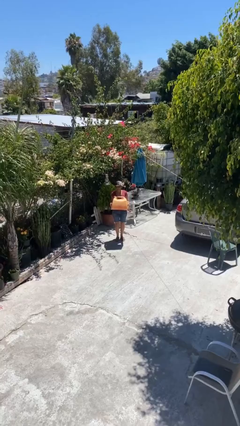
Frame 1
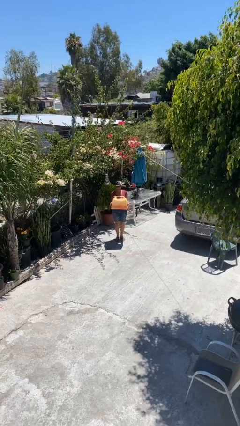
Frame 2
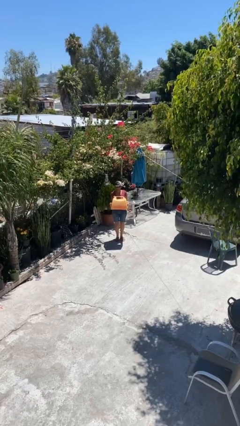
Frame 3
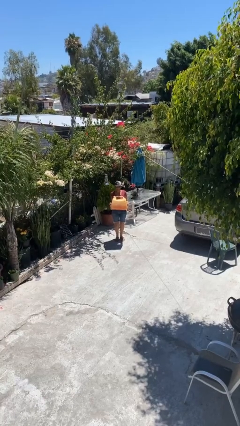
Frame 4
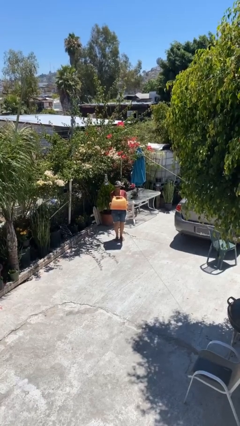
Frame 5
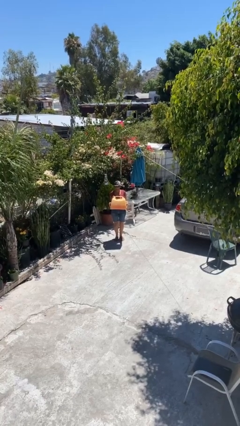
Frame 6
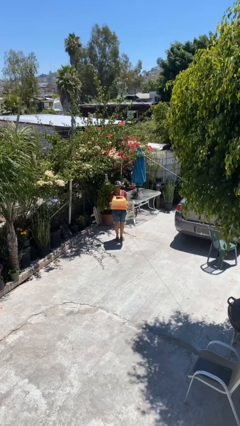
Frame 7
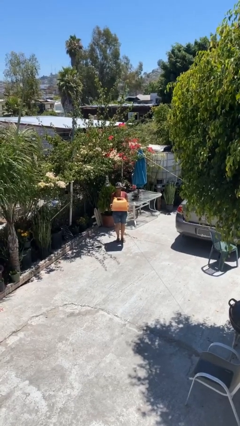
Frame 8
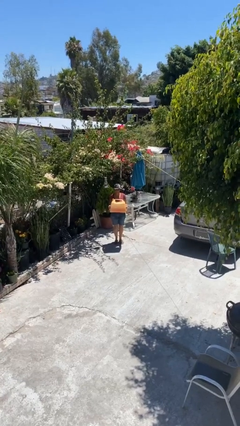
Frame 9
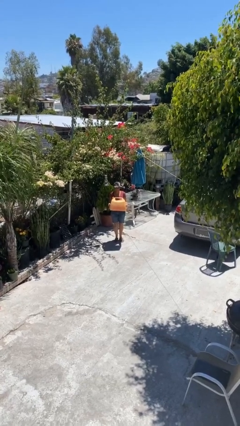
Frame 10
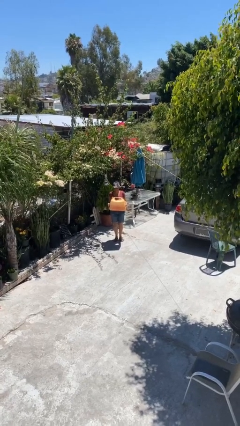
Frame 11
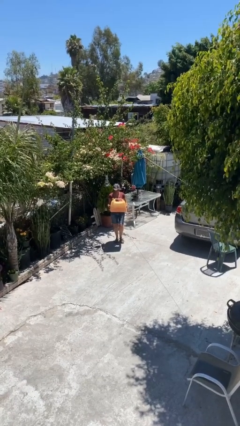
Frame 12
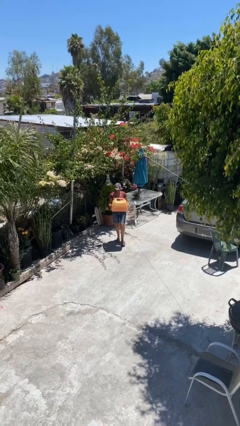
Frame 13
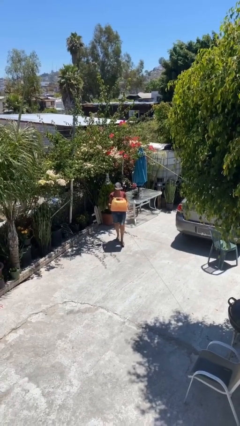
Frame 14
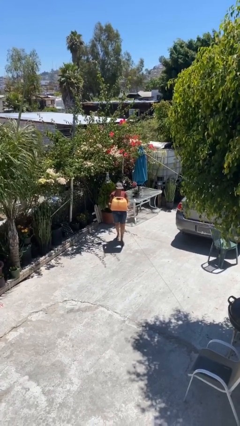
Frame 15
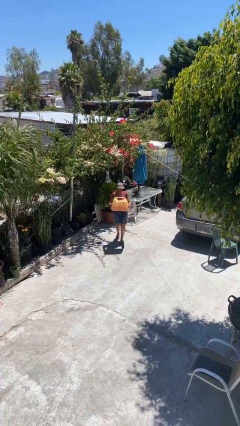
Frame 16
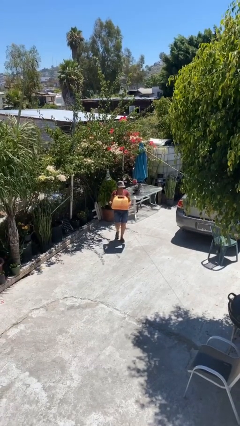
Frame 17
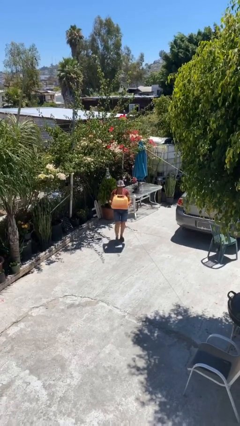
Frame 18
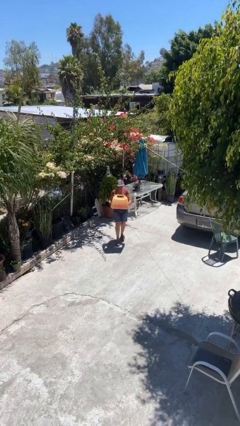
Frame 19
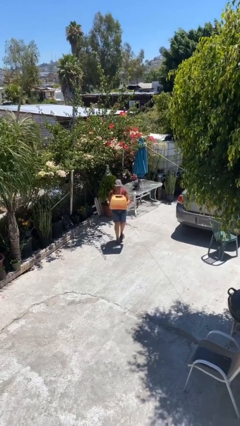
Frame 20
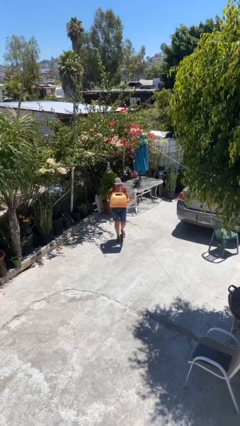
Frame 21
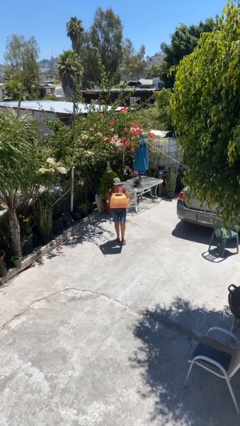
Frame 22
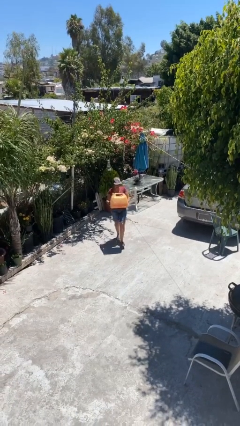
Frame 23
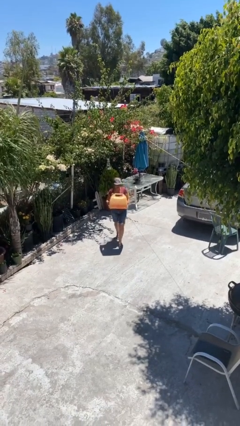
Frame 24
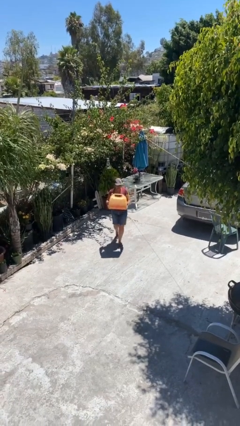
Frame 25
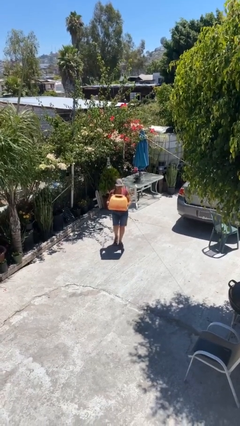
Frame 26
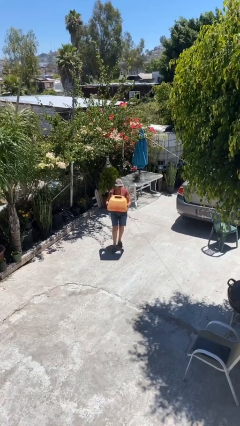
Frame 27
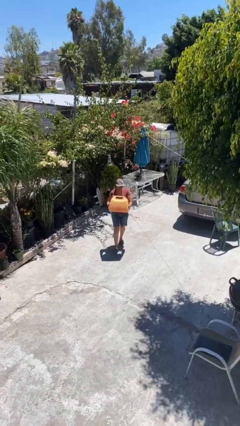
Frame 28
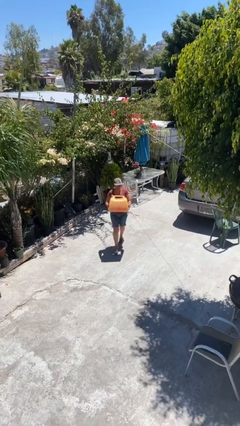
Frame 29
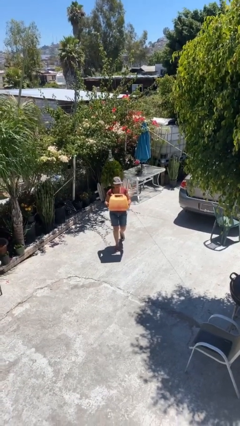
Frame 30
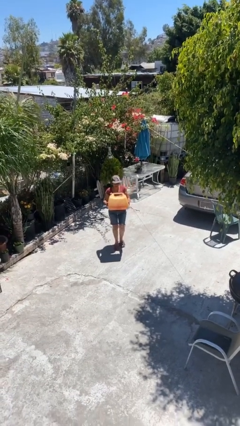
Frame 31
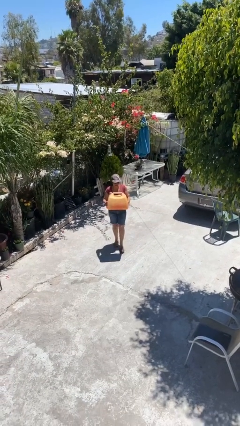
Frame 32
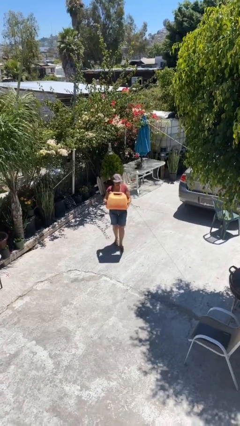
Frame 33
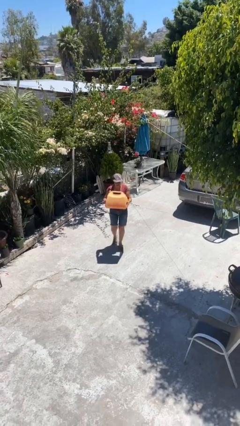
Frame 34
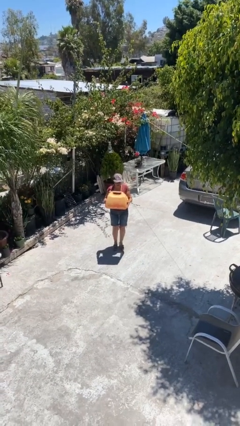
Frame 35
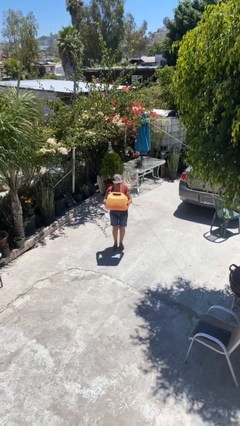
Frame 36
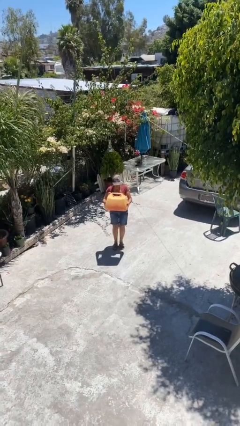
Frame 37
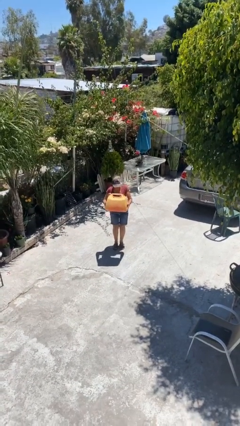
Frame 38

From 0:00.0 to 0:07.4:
person carries heavy object

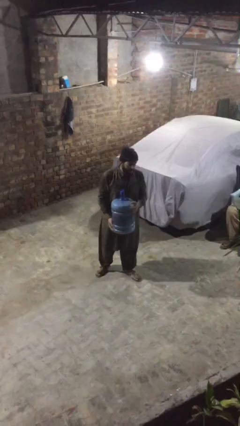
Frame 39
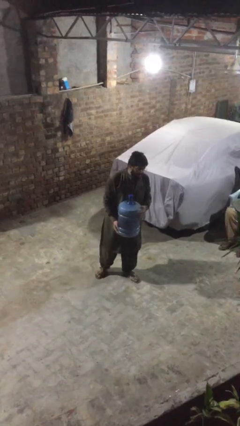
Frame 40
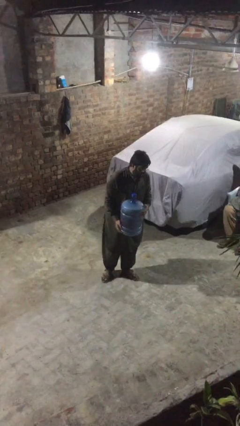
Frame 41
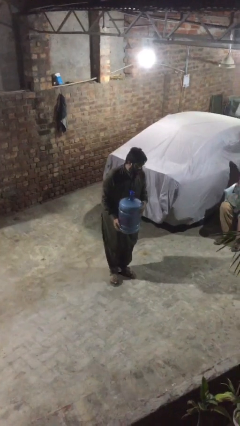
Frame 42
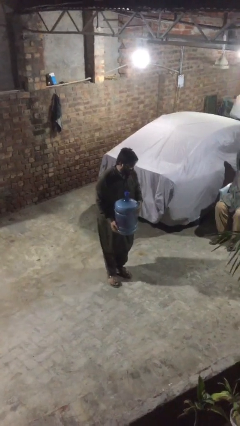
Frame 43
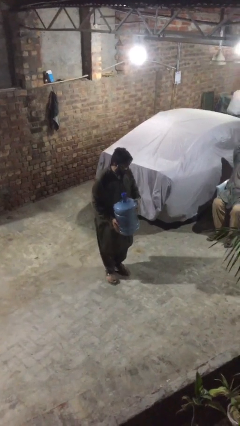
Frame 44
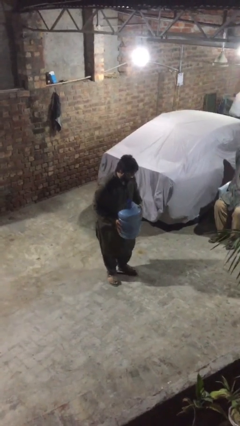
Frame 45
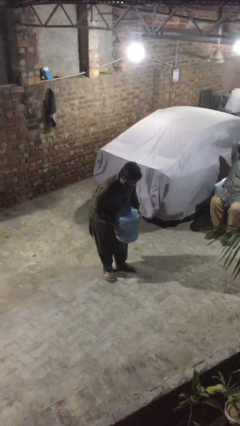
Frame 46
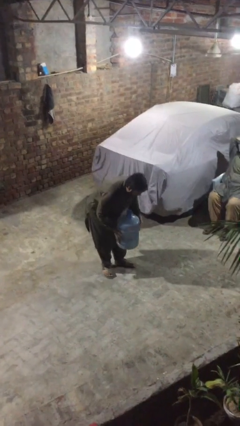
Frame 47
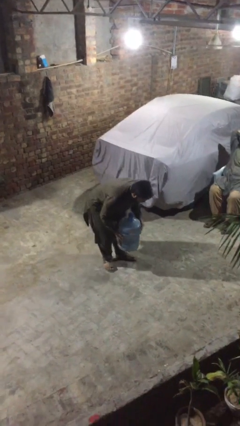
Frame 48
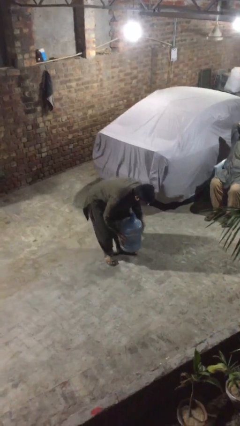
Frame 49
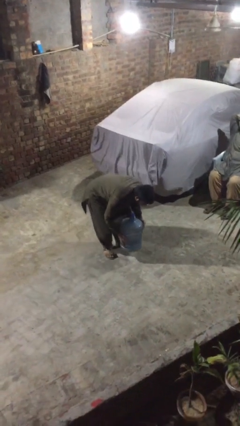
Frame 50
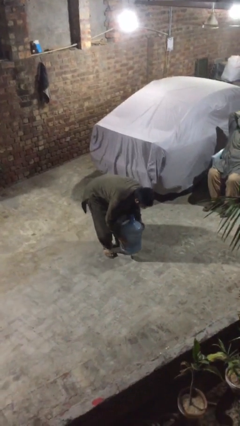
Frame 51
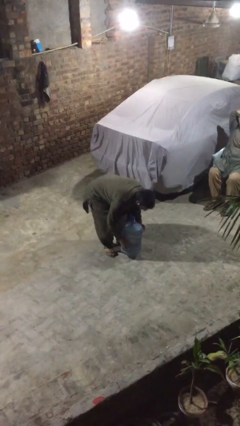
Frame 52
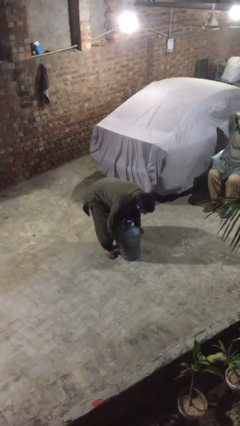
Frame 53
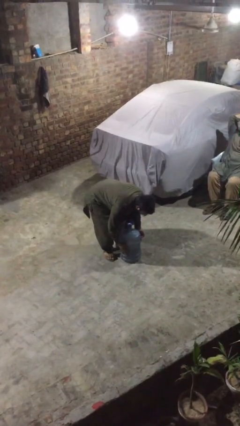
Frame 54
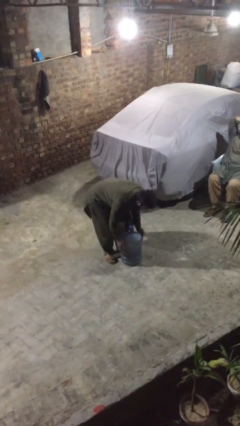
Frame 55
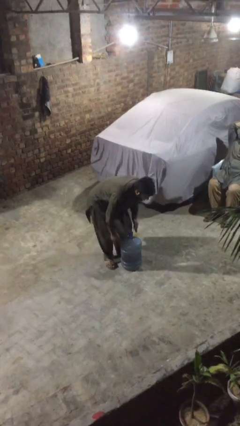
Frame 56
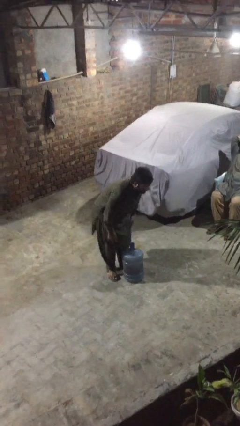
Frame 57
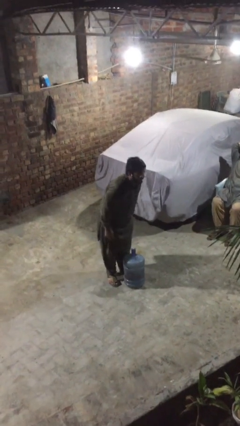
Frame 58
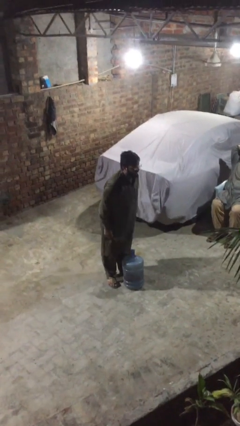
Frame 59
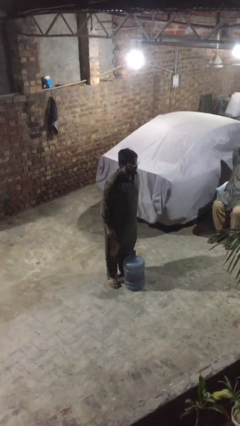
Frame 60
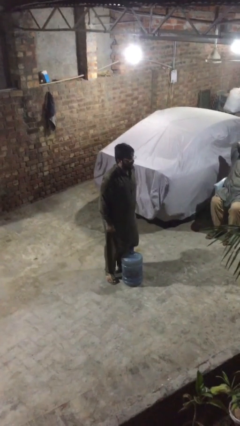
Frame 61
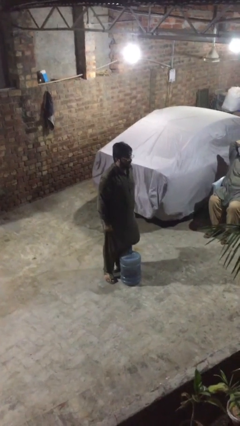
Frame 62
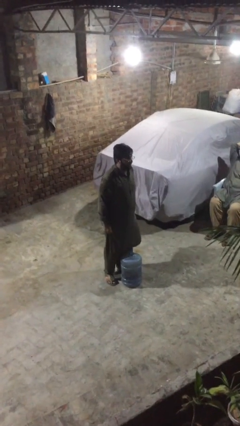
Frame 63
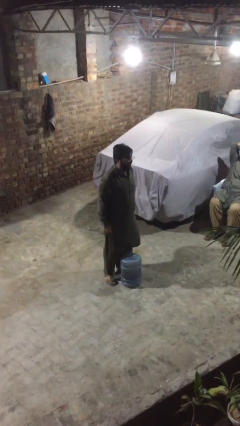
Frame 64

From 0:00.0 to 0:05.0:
person puts down object on floor

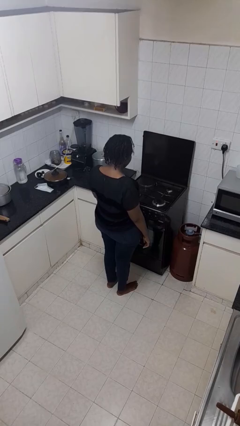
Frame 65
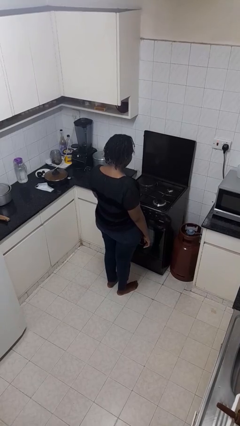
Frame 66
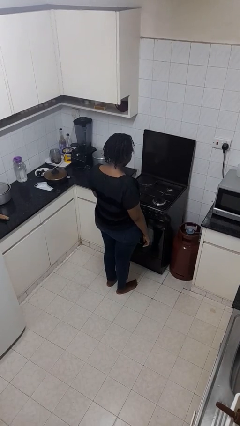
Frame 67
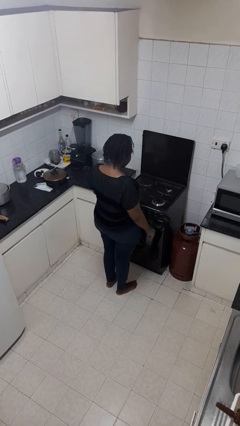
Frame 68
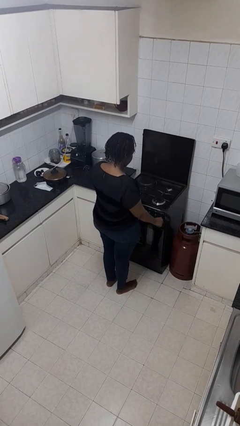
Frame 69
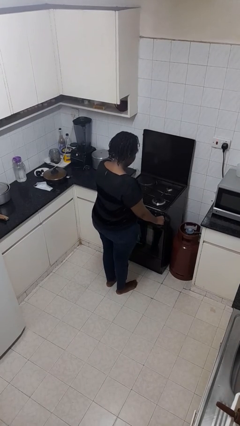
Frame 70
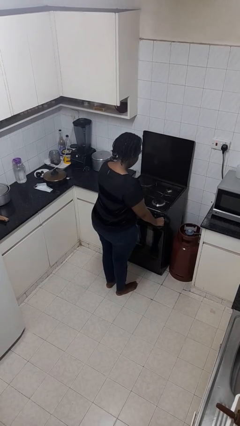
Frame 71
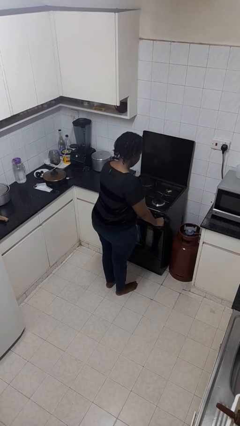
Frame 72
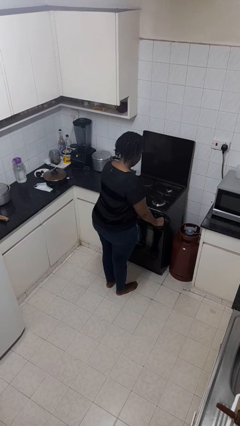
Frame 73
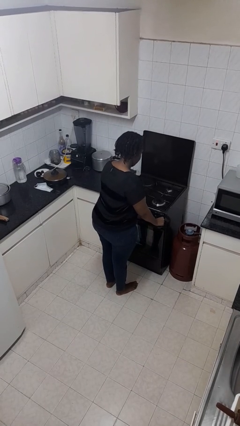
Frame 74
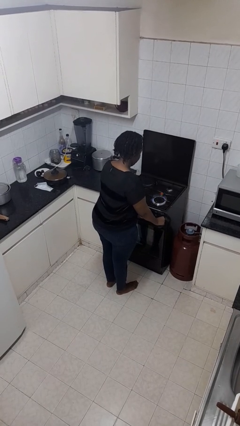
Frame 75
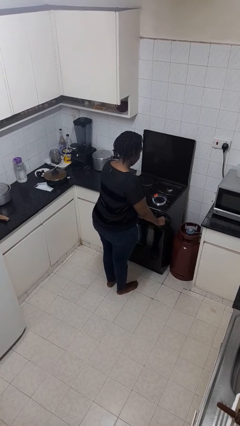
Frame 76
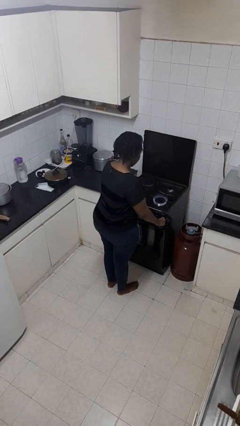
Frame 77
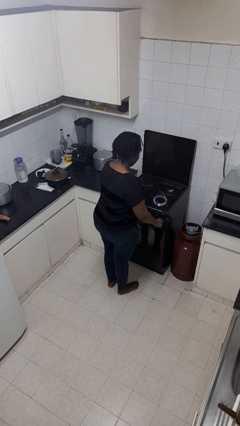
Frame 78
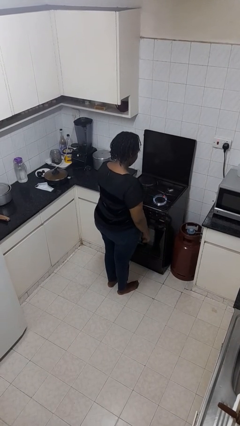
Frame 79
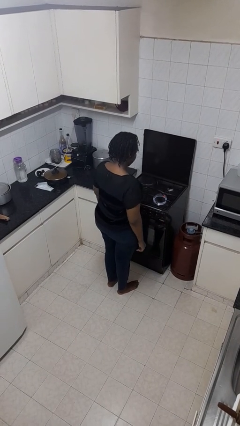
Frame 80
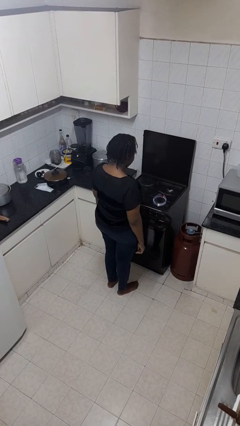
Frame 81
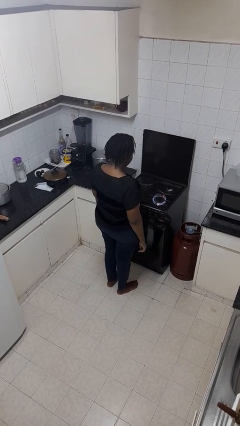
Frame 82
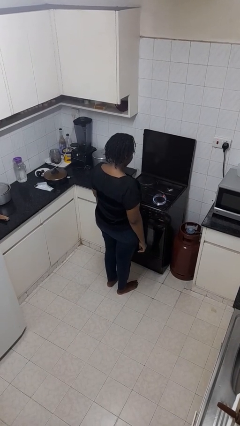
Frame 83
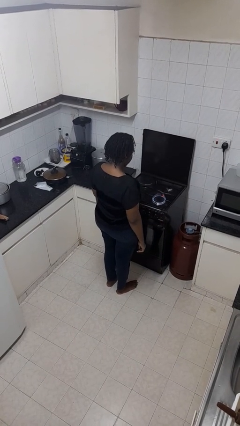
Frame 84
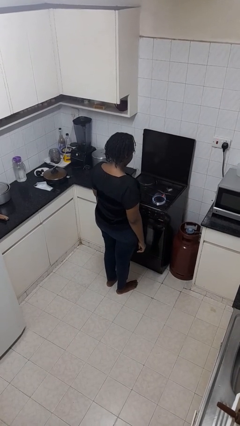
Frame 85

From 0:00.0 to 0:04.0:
person turns on stovetop

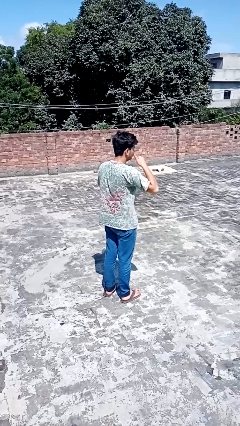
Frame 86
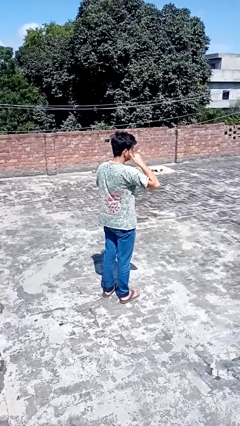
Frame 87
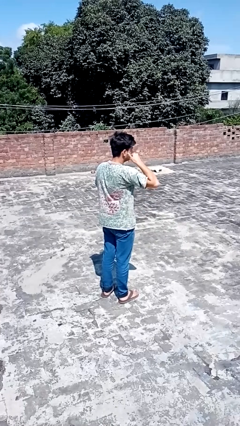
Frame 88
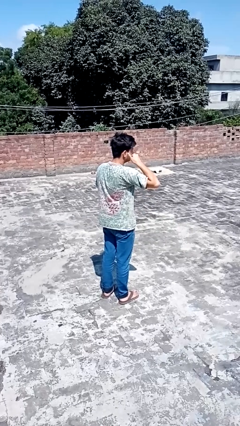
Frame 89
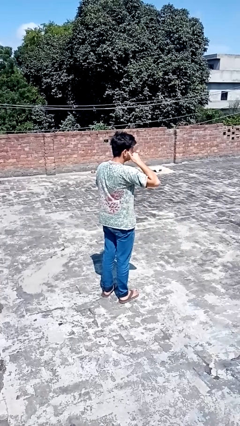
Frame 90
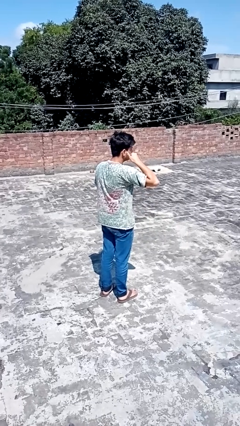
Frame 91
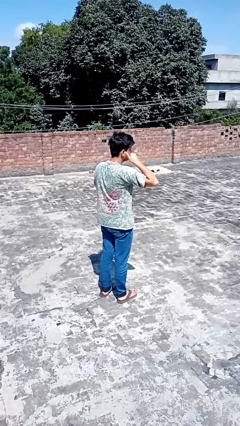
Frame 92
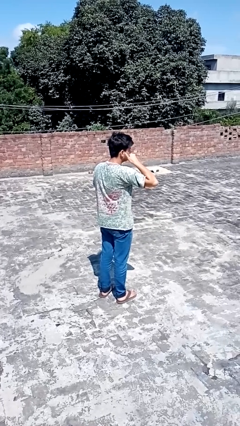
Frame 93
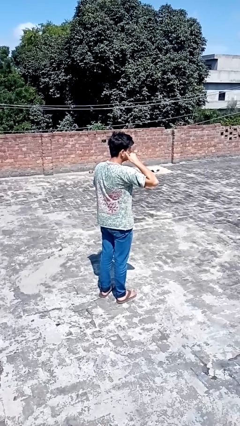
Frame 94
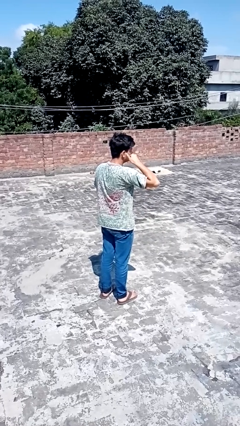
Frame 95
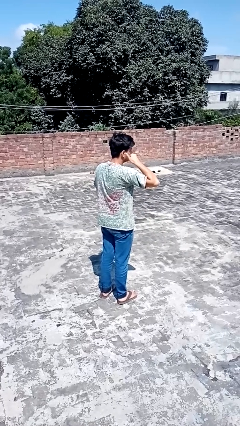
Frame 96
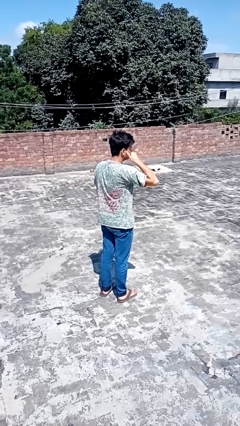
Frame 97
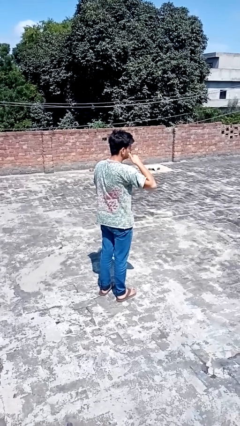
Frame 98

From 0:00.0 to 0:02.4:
person gestures call me
